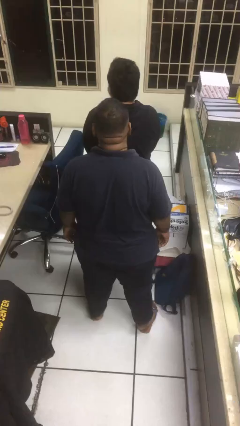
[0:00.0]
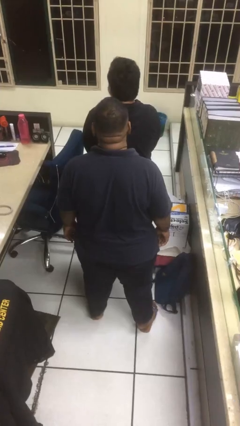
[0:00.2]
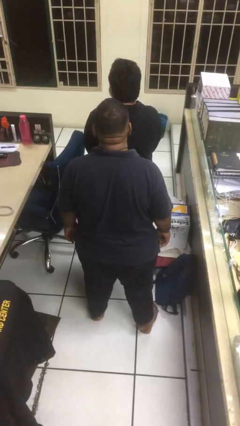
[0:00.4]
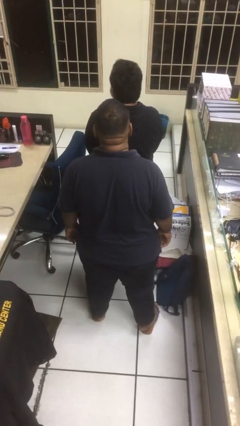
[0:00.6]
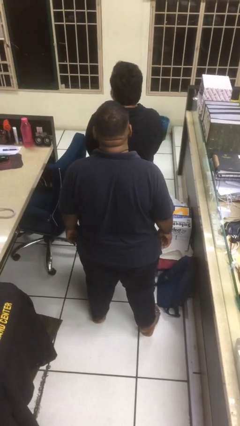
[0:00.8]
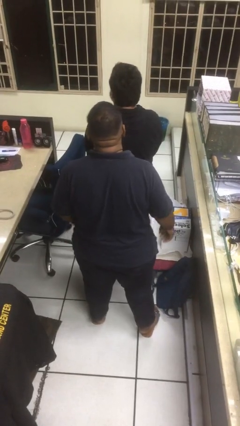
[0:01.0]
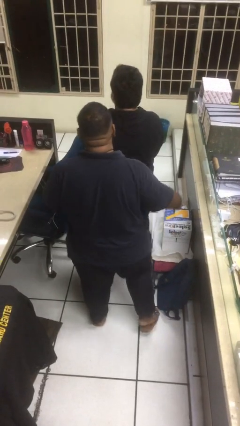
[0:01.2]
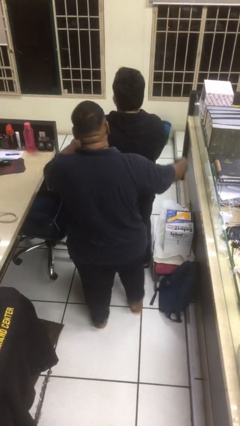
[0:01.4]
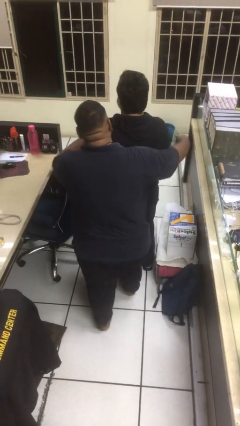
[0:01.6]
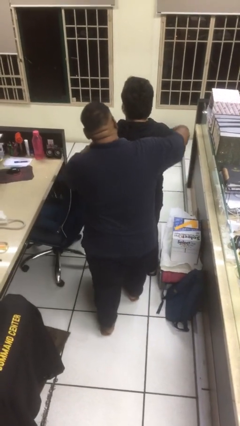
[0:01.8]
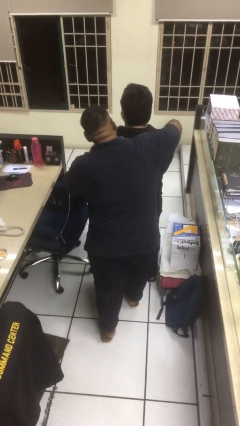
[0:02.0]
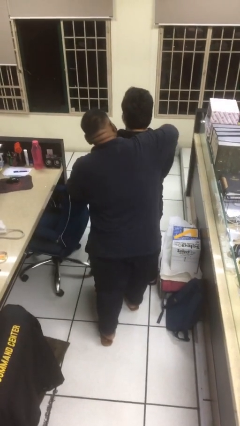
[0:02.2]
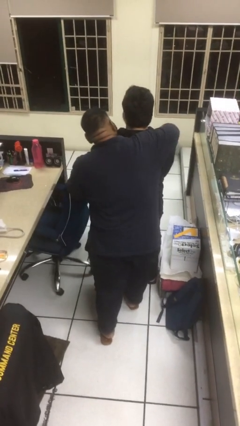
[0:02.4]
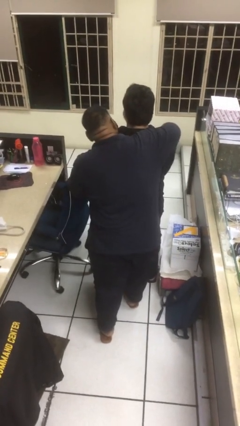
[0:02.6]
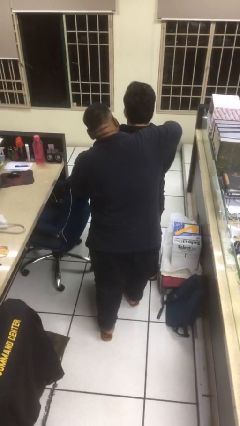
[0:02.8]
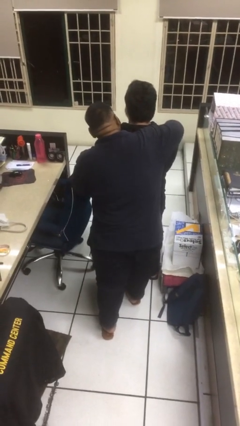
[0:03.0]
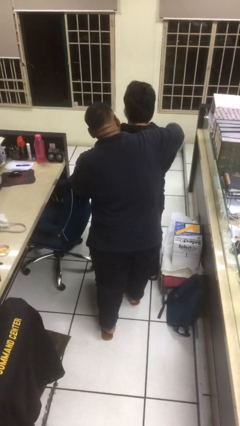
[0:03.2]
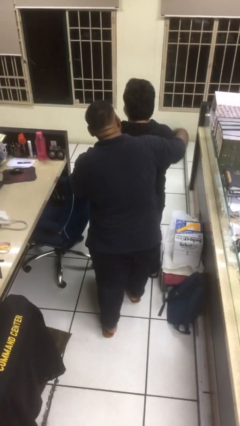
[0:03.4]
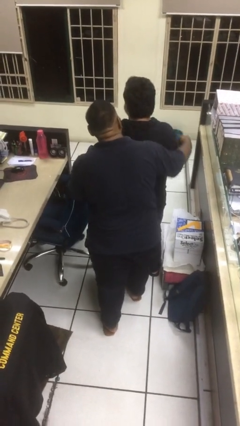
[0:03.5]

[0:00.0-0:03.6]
person hugs person from behind

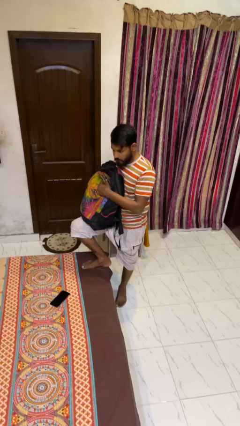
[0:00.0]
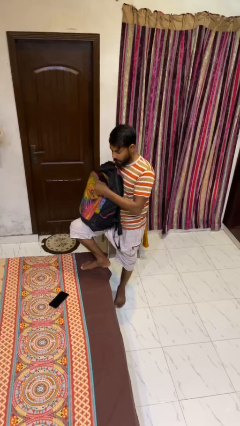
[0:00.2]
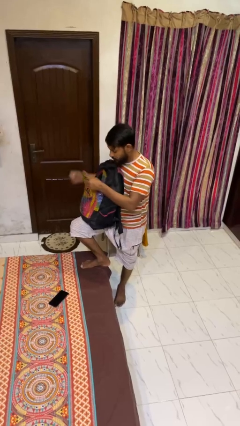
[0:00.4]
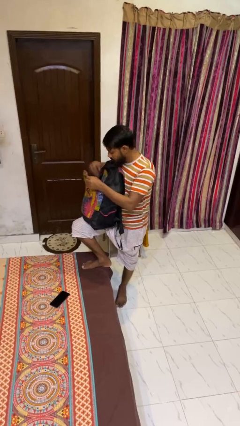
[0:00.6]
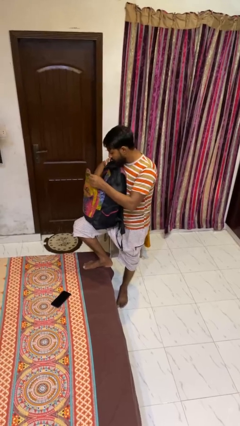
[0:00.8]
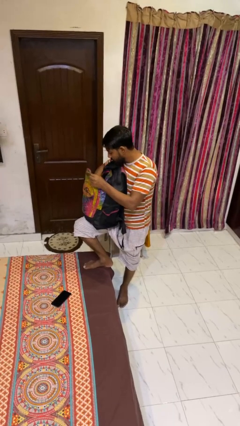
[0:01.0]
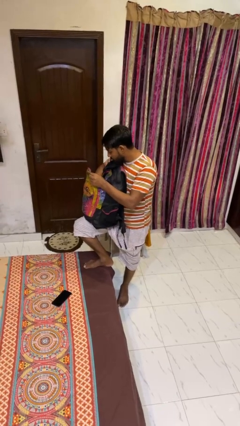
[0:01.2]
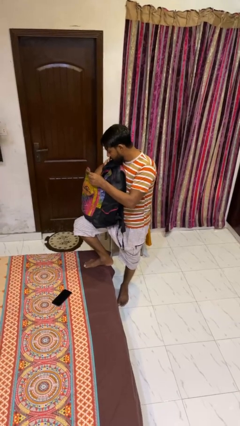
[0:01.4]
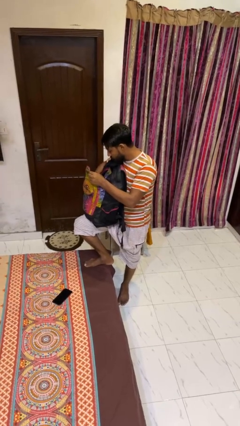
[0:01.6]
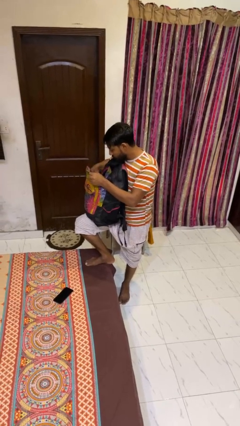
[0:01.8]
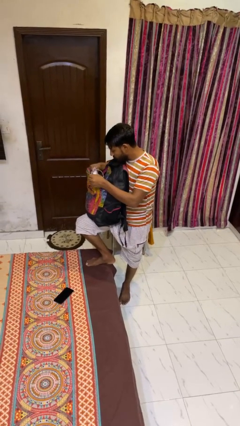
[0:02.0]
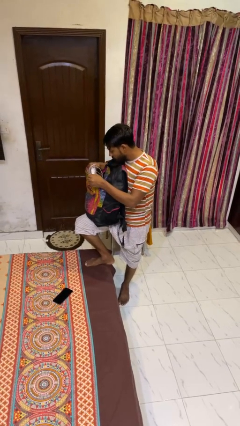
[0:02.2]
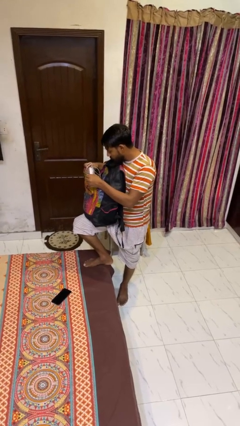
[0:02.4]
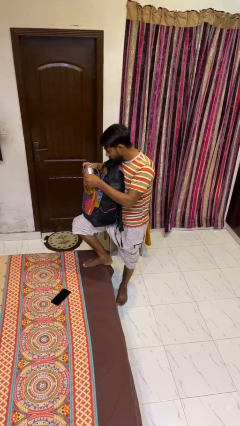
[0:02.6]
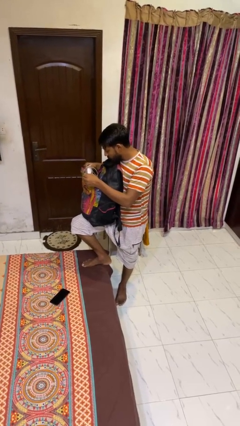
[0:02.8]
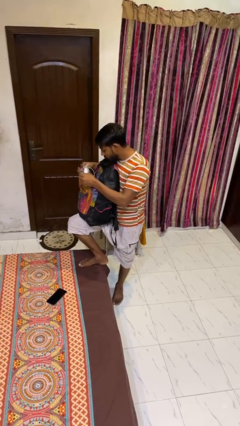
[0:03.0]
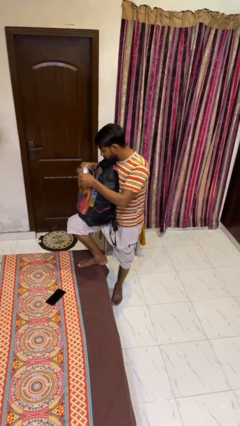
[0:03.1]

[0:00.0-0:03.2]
person searches in backpack

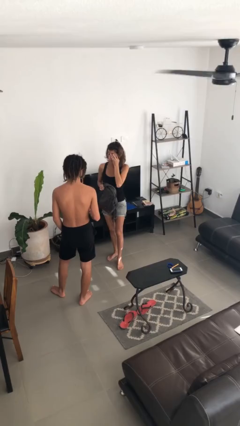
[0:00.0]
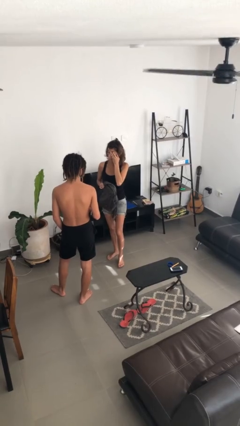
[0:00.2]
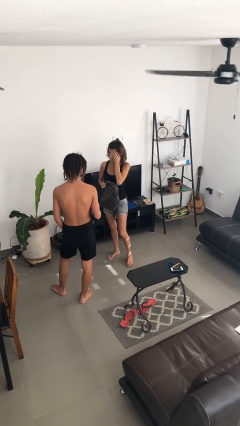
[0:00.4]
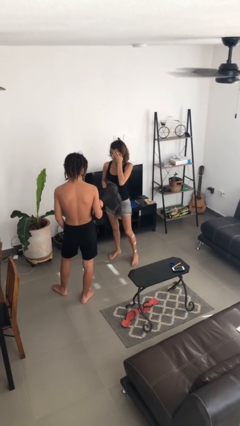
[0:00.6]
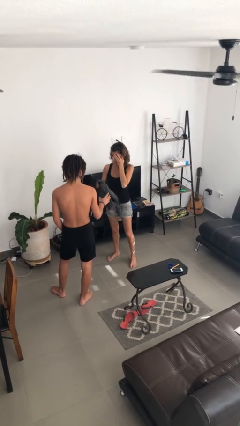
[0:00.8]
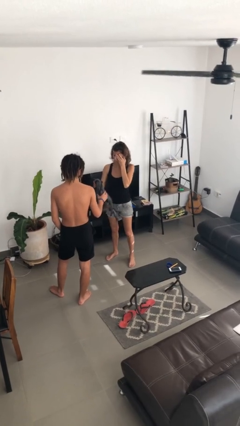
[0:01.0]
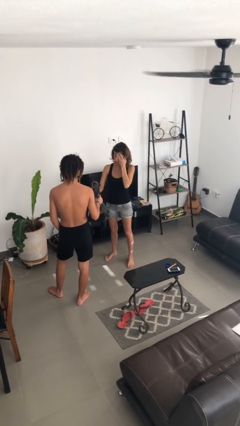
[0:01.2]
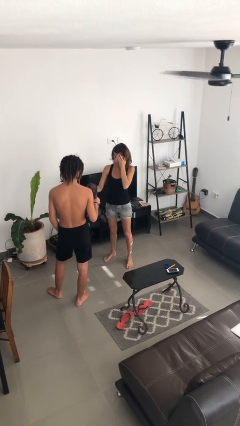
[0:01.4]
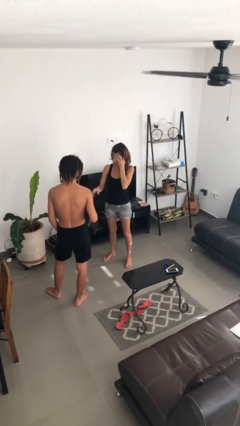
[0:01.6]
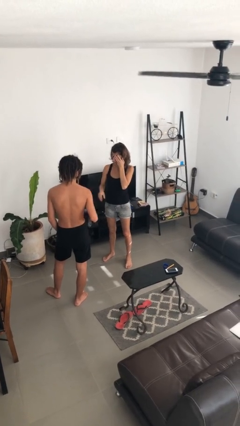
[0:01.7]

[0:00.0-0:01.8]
person transfers object to person

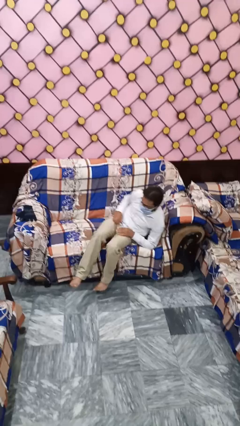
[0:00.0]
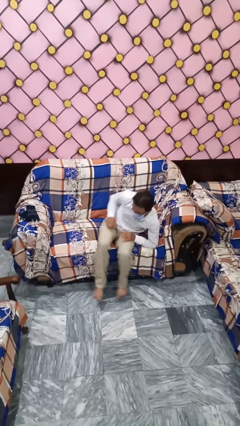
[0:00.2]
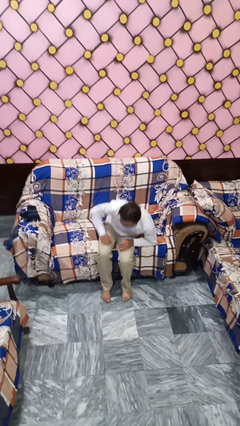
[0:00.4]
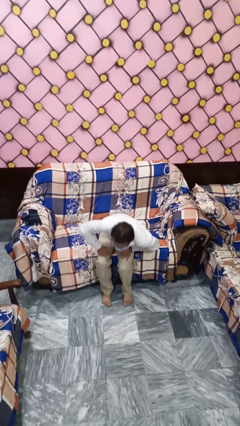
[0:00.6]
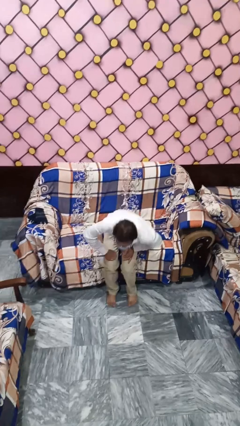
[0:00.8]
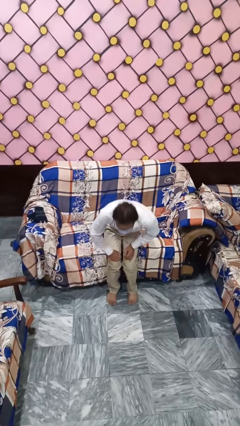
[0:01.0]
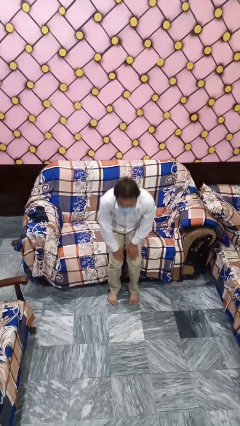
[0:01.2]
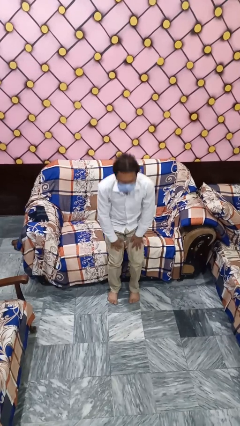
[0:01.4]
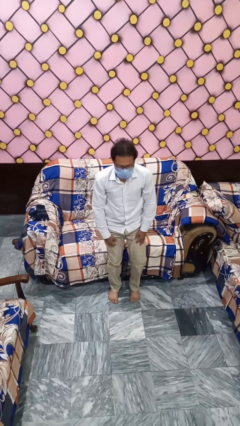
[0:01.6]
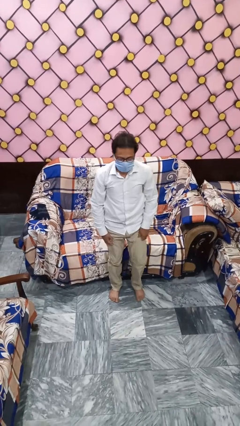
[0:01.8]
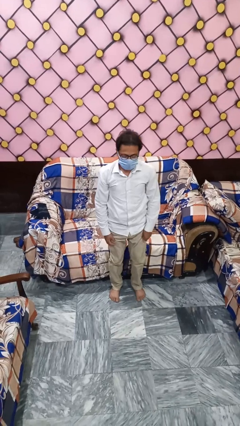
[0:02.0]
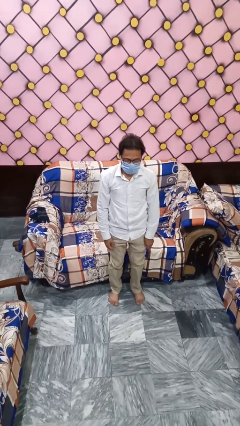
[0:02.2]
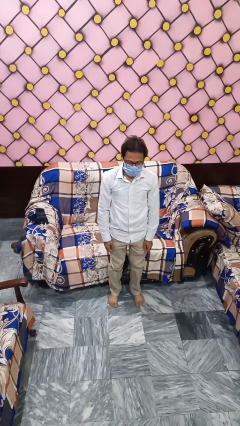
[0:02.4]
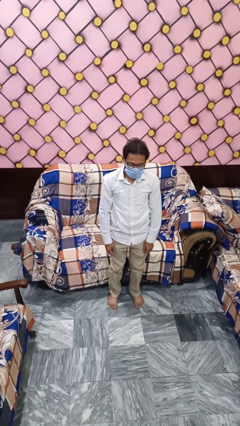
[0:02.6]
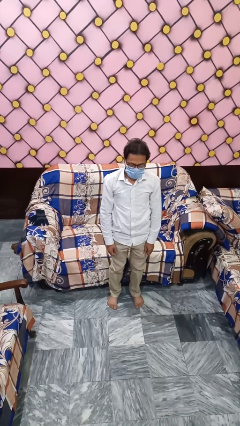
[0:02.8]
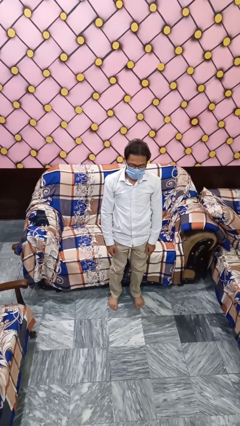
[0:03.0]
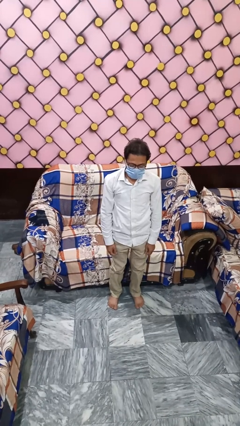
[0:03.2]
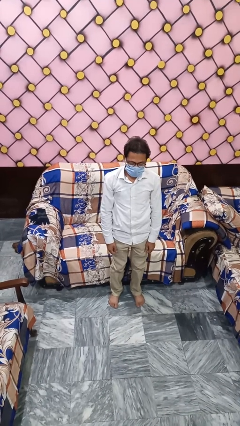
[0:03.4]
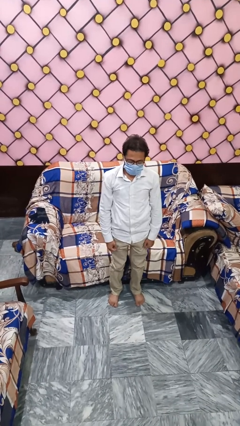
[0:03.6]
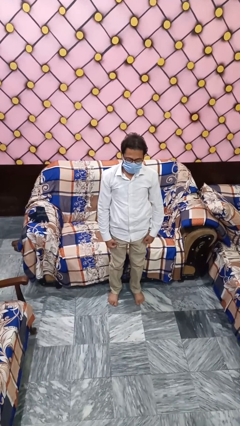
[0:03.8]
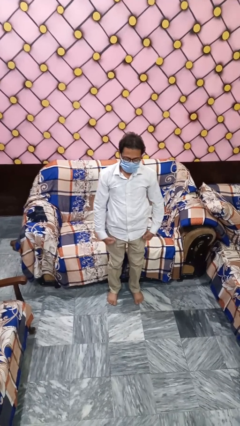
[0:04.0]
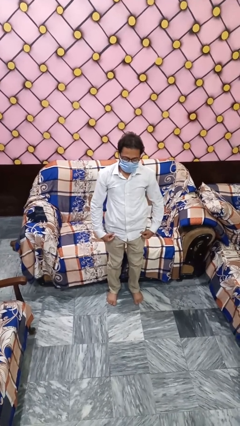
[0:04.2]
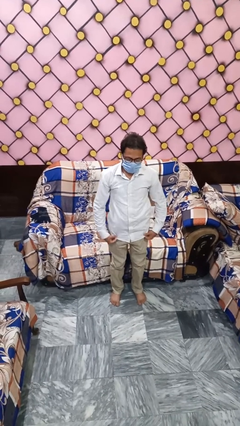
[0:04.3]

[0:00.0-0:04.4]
person stands up

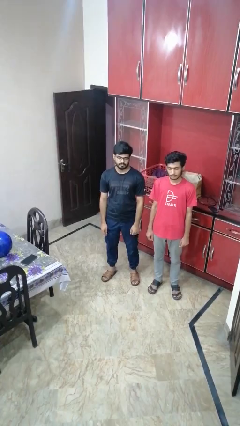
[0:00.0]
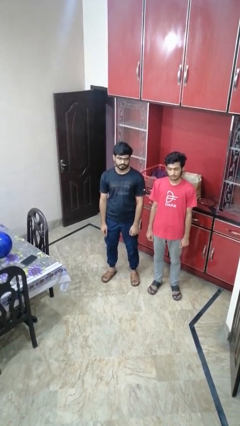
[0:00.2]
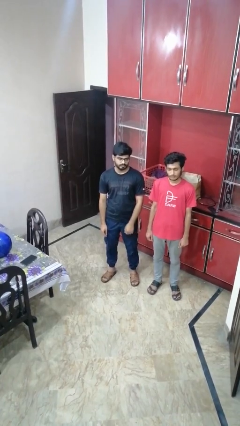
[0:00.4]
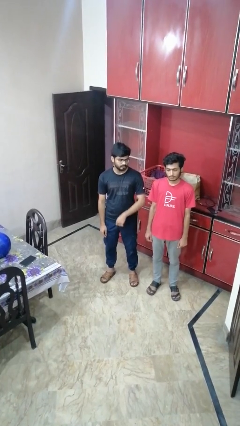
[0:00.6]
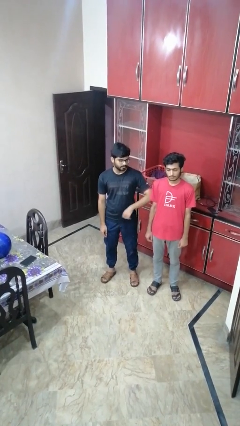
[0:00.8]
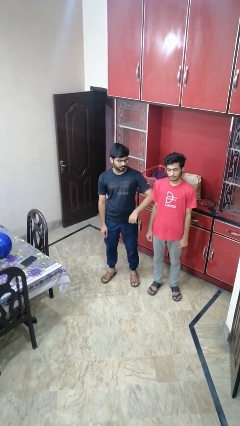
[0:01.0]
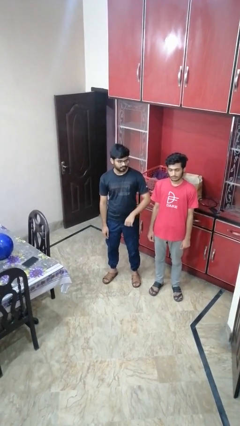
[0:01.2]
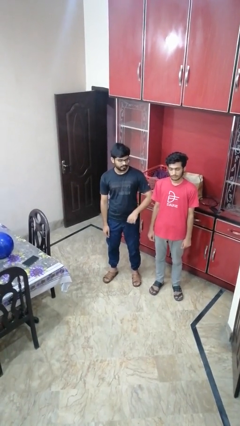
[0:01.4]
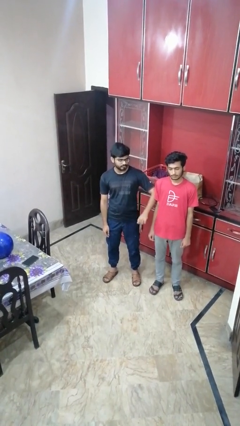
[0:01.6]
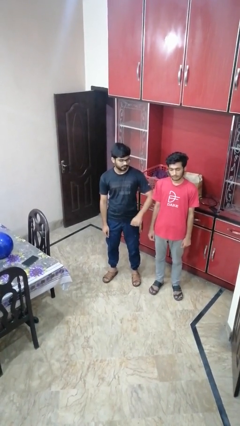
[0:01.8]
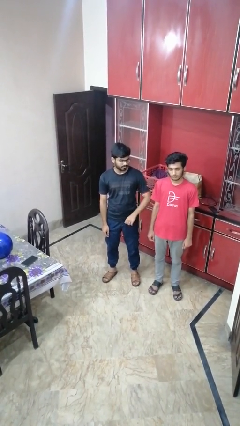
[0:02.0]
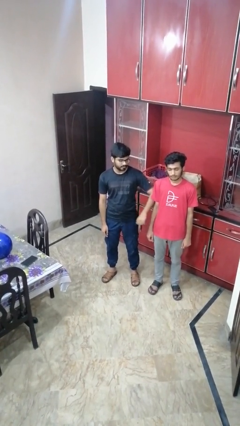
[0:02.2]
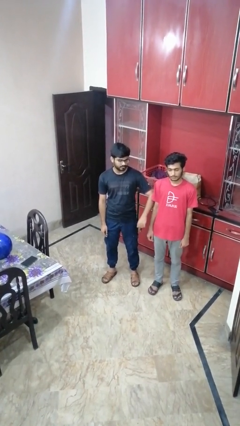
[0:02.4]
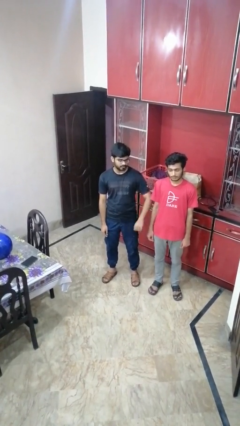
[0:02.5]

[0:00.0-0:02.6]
person nudges person with elbow

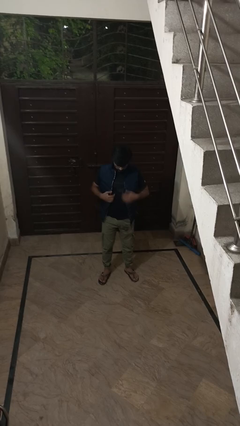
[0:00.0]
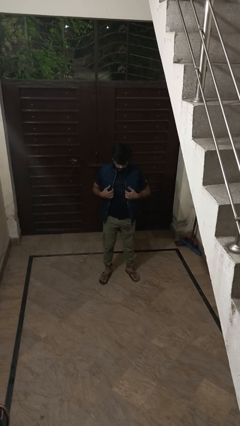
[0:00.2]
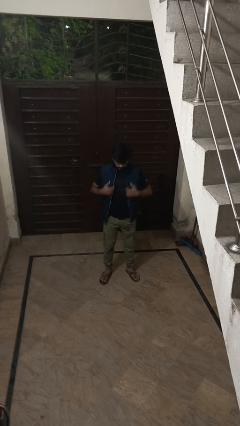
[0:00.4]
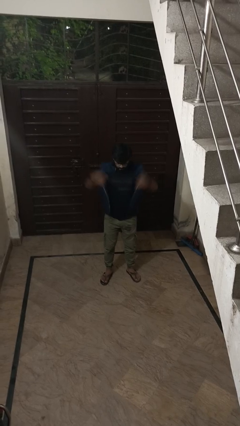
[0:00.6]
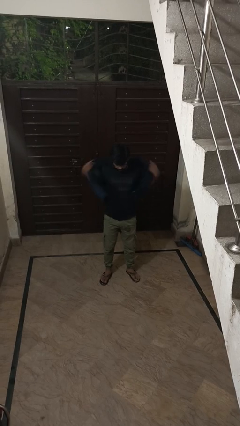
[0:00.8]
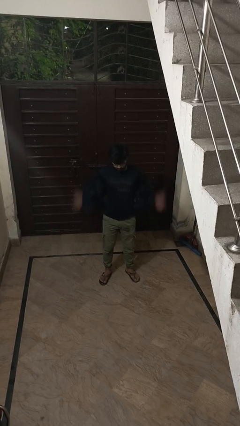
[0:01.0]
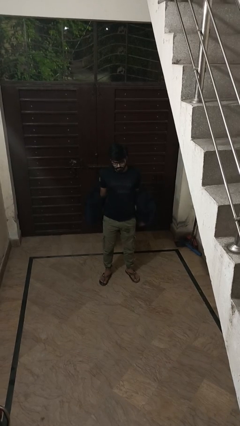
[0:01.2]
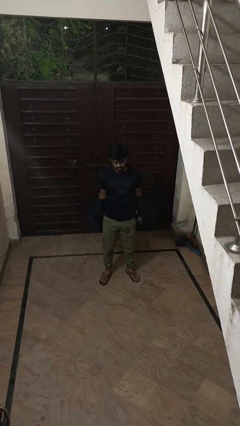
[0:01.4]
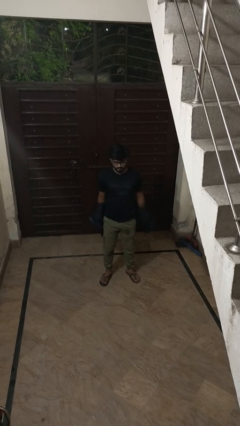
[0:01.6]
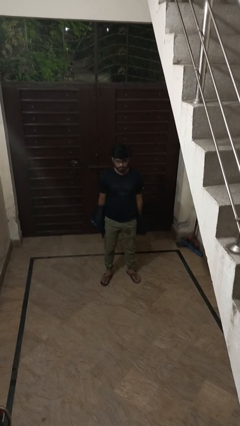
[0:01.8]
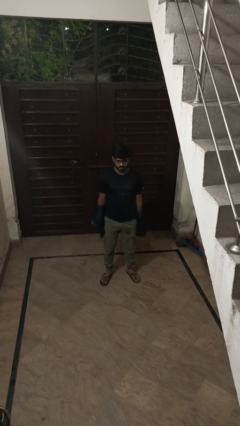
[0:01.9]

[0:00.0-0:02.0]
person takes off jacket
